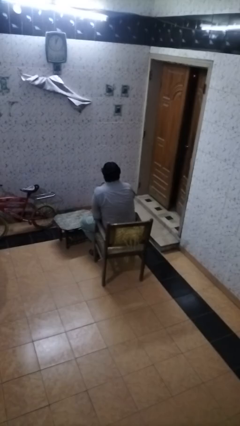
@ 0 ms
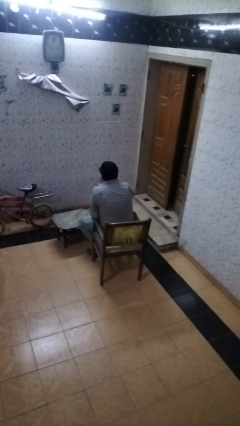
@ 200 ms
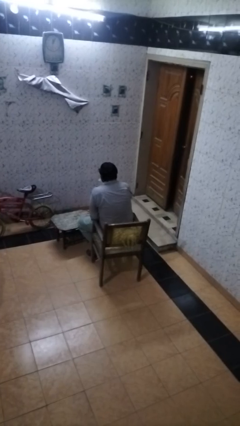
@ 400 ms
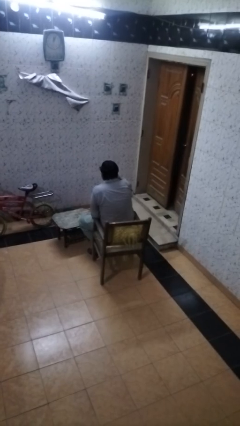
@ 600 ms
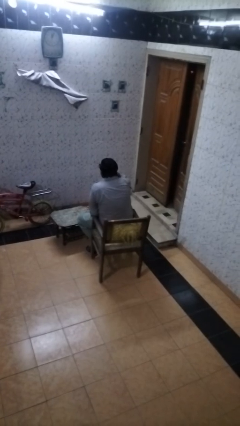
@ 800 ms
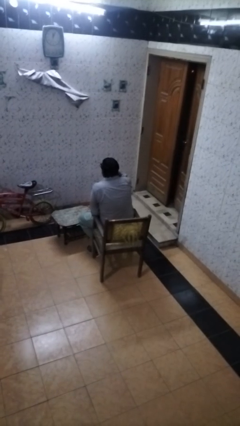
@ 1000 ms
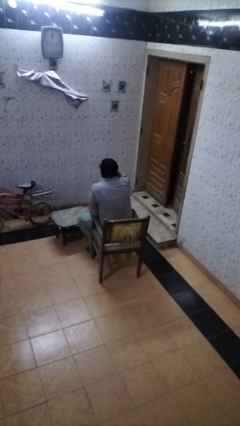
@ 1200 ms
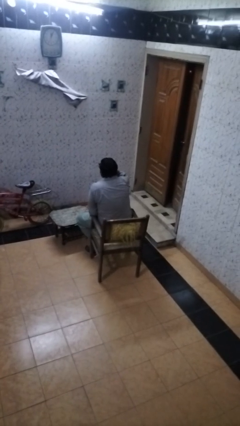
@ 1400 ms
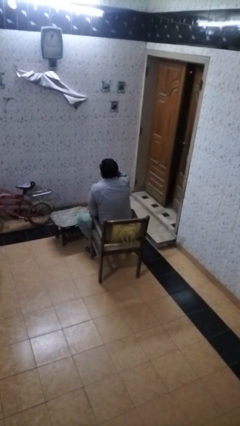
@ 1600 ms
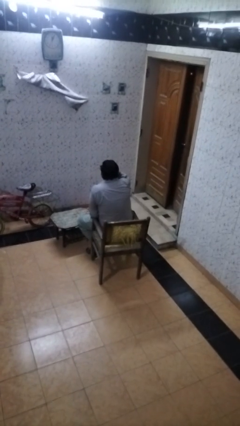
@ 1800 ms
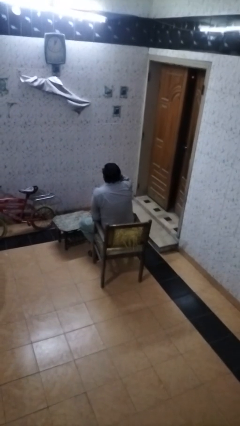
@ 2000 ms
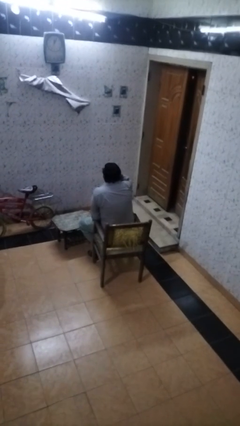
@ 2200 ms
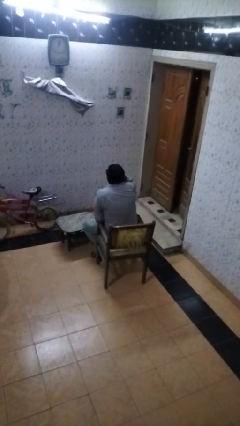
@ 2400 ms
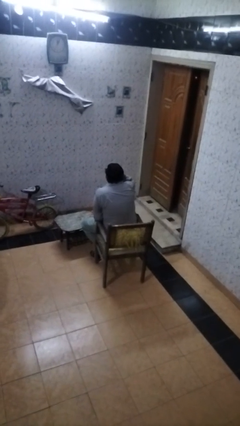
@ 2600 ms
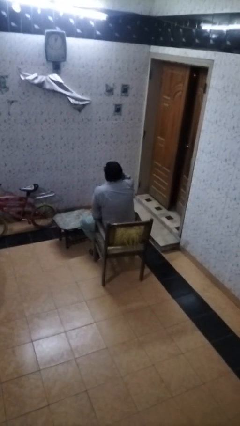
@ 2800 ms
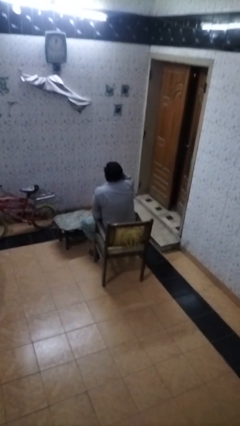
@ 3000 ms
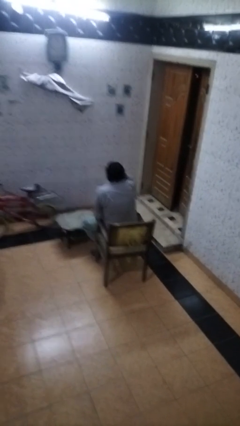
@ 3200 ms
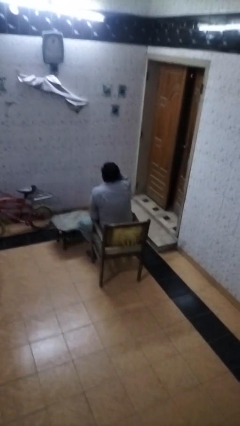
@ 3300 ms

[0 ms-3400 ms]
person drinks from shotglass

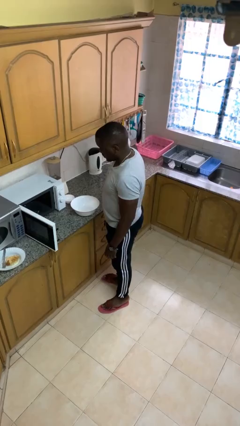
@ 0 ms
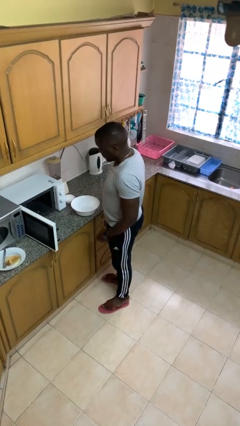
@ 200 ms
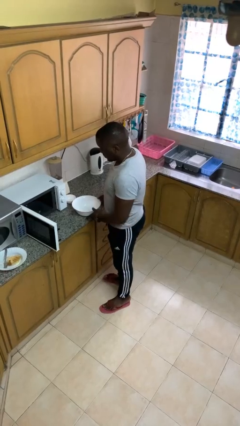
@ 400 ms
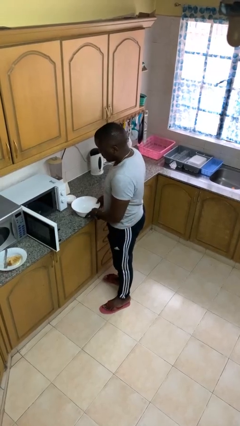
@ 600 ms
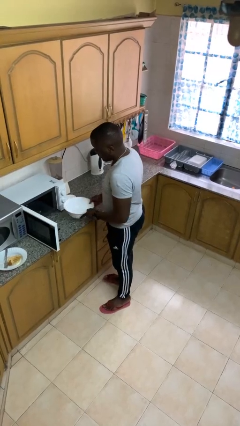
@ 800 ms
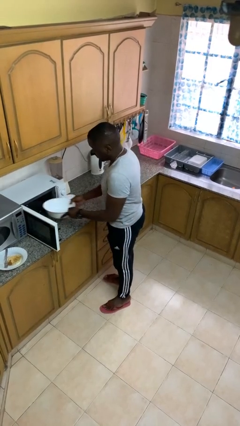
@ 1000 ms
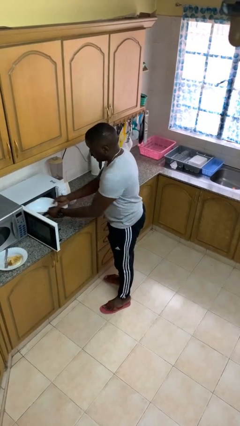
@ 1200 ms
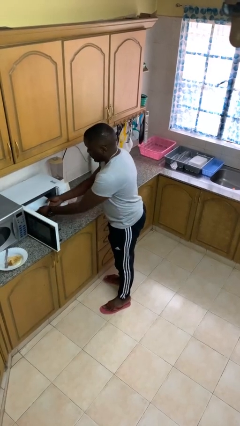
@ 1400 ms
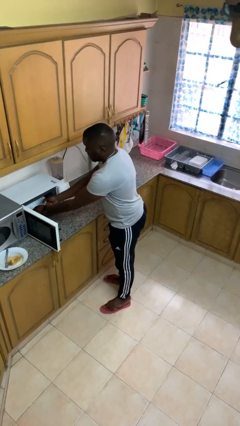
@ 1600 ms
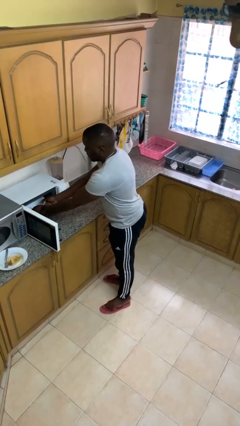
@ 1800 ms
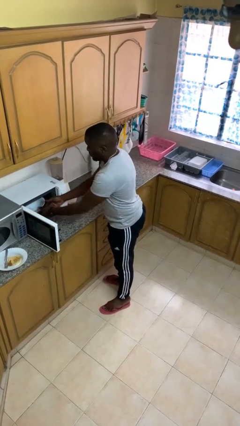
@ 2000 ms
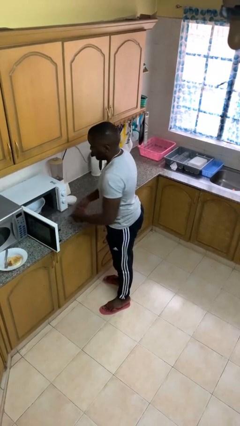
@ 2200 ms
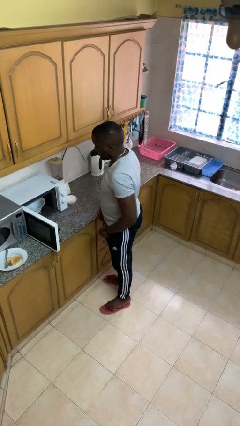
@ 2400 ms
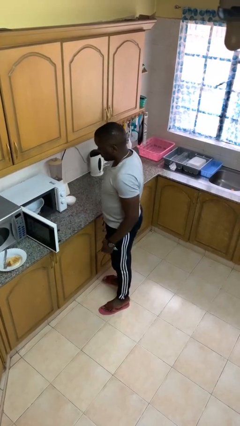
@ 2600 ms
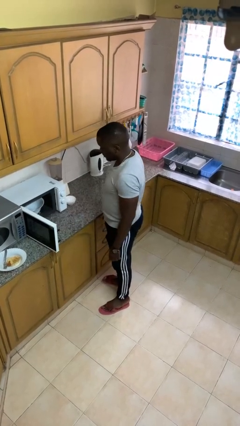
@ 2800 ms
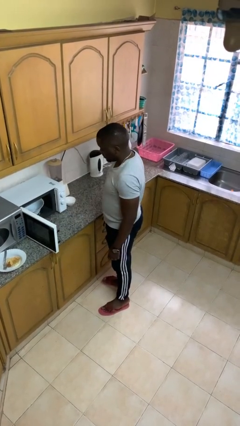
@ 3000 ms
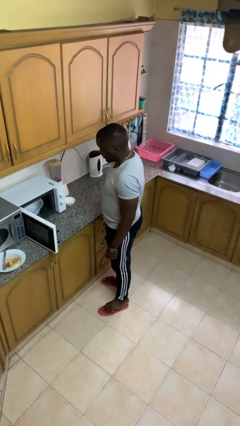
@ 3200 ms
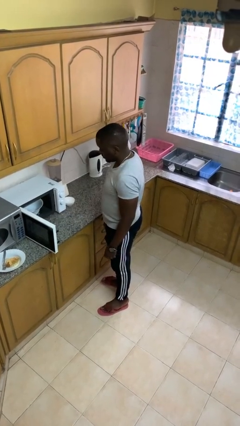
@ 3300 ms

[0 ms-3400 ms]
person puts object into microwave

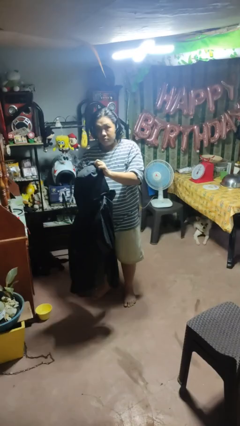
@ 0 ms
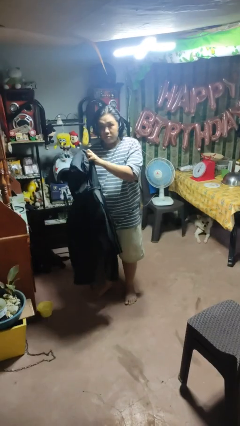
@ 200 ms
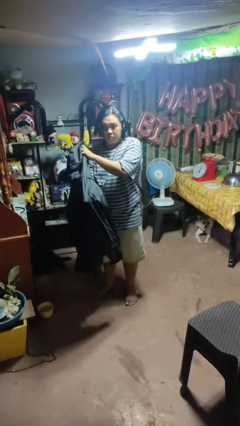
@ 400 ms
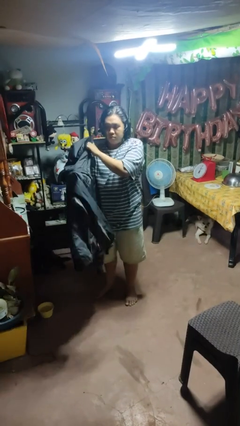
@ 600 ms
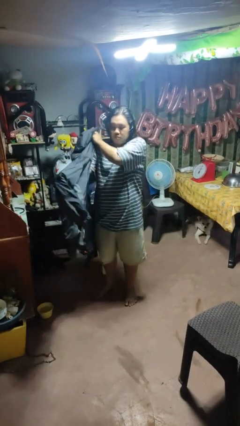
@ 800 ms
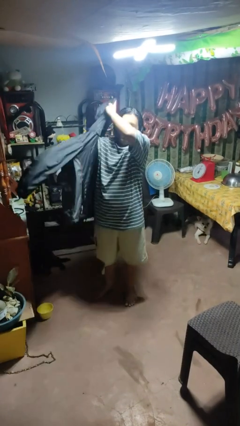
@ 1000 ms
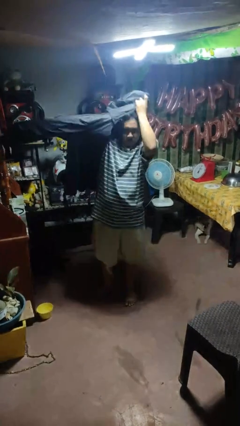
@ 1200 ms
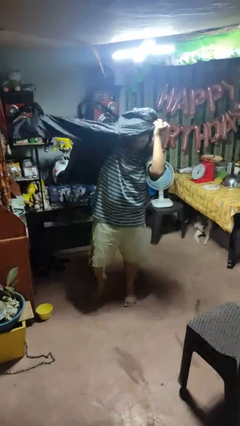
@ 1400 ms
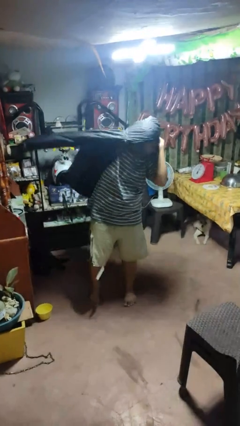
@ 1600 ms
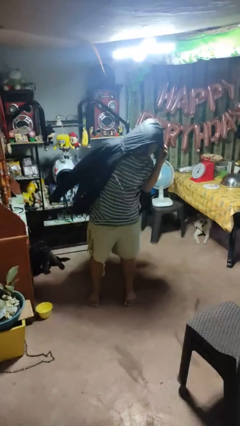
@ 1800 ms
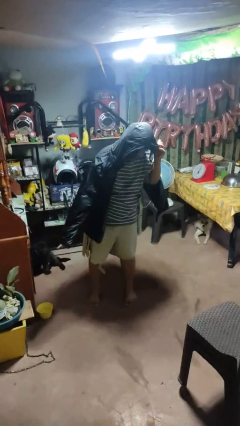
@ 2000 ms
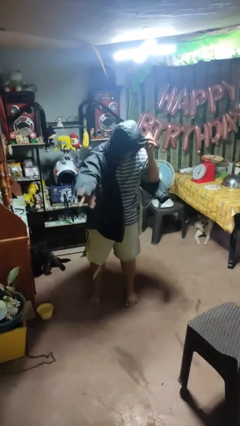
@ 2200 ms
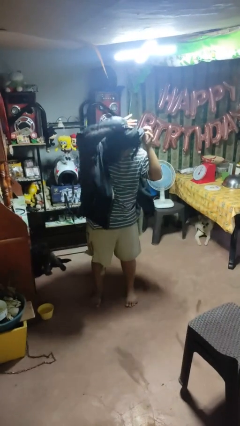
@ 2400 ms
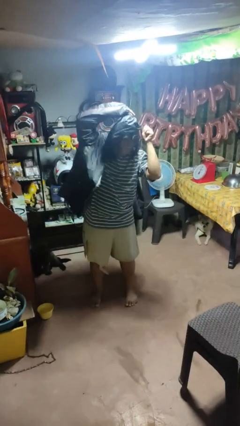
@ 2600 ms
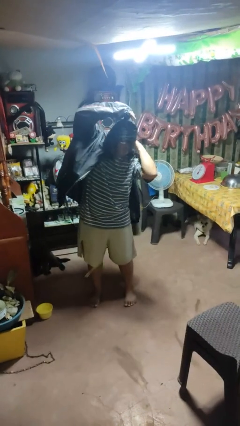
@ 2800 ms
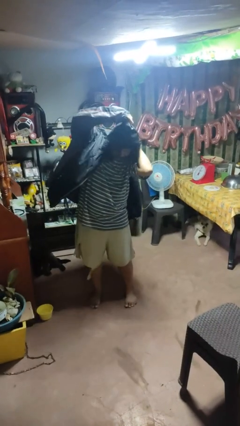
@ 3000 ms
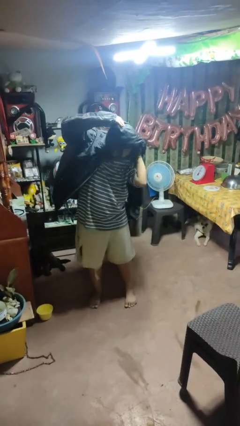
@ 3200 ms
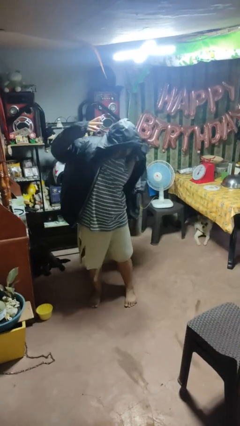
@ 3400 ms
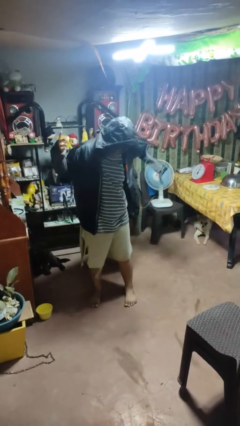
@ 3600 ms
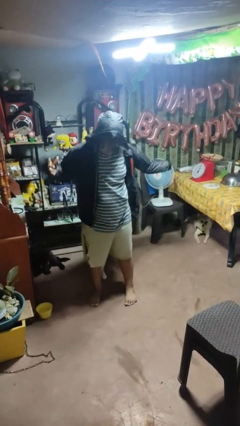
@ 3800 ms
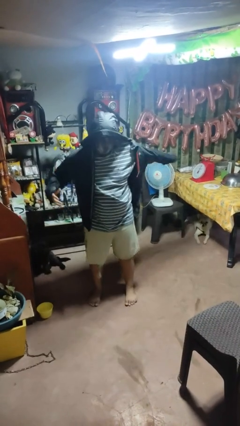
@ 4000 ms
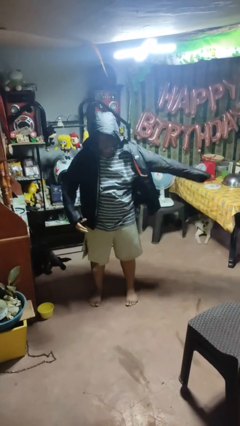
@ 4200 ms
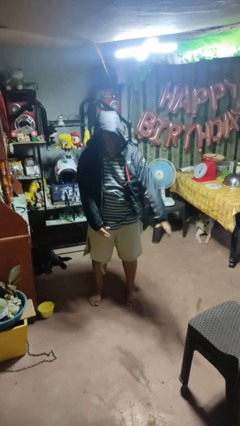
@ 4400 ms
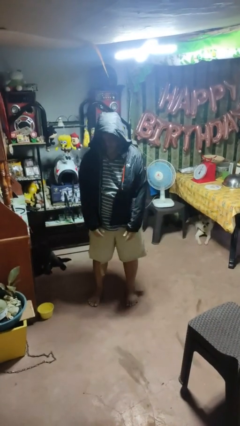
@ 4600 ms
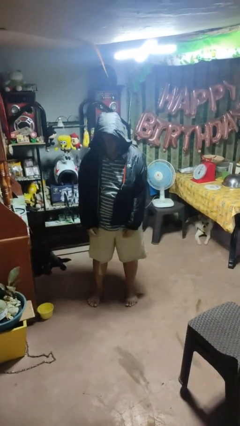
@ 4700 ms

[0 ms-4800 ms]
person puts on hoodie

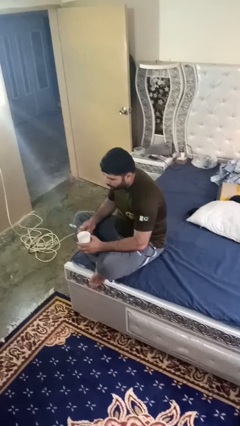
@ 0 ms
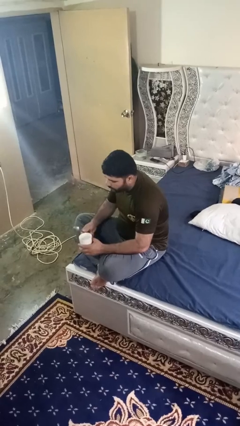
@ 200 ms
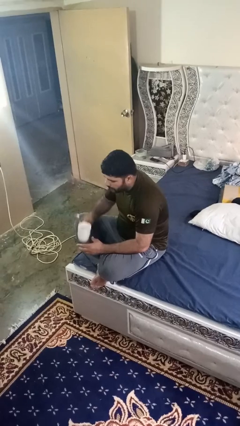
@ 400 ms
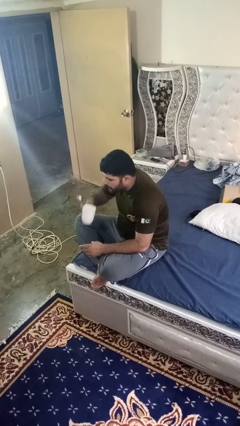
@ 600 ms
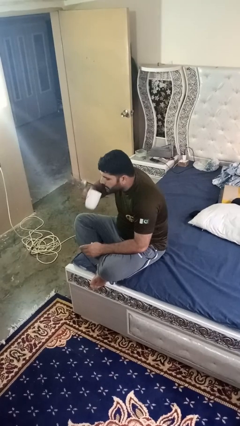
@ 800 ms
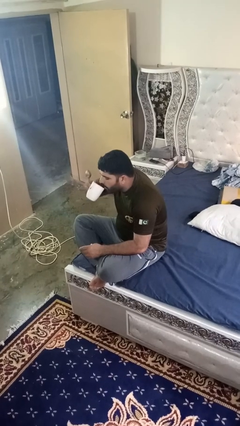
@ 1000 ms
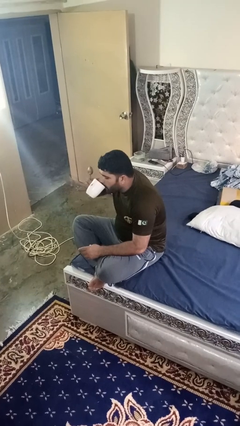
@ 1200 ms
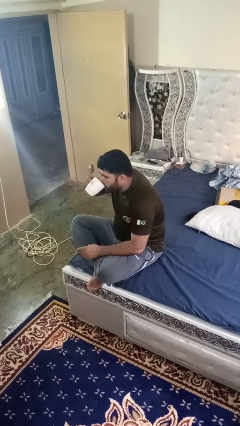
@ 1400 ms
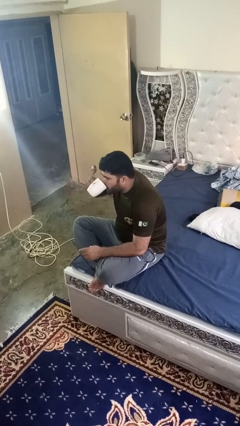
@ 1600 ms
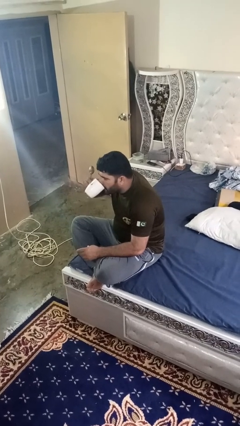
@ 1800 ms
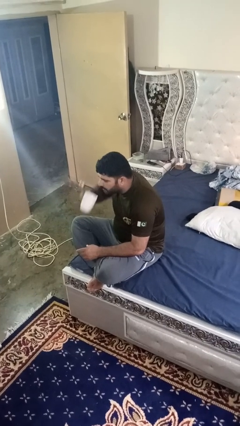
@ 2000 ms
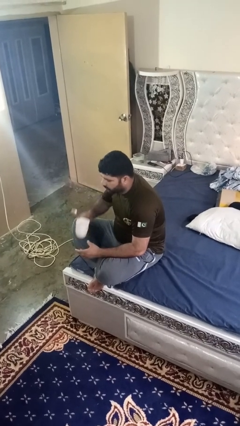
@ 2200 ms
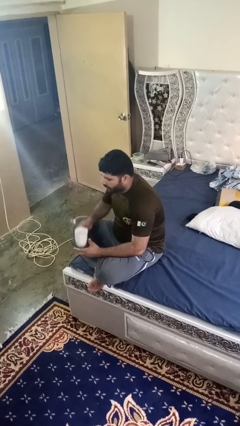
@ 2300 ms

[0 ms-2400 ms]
person drinks from mug

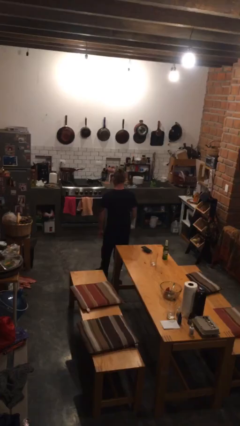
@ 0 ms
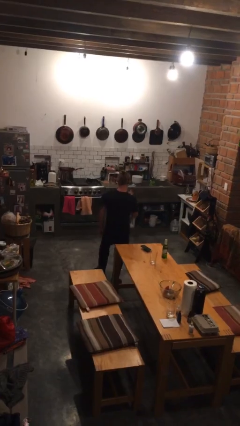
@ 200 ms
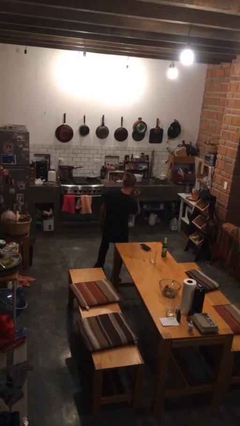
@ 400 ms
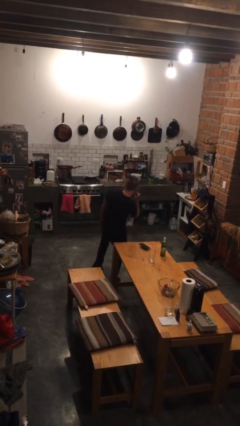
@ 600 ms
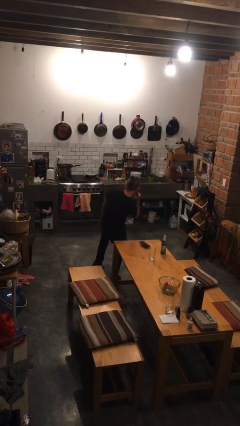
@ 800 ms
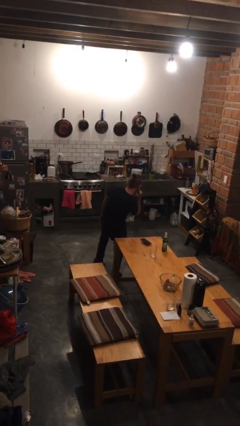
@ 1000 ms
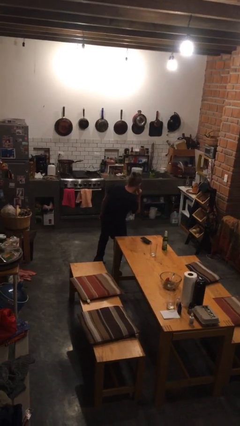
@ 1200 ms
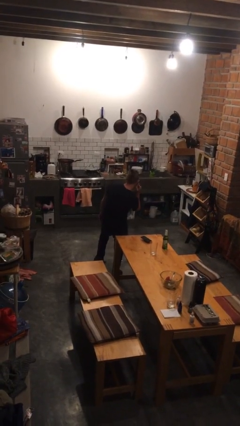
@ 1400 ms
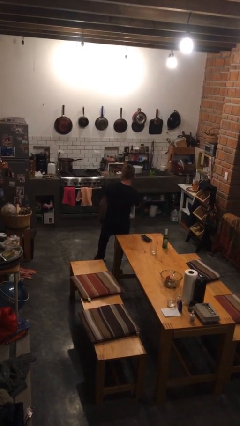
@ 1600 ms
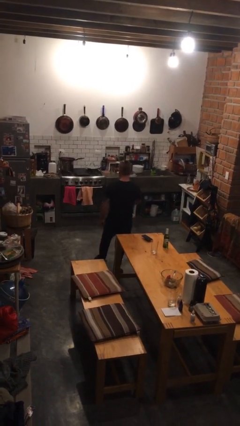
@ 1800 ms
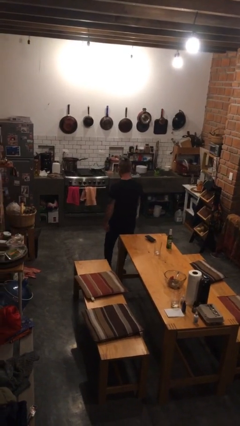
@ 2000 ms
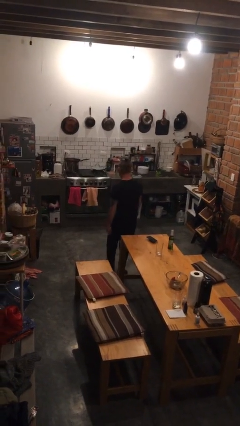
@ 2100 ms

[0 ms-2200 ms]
person gestures listen closely

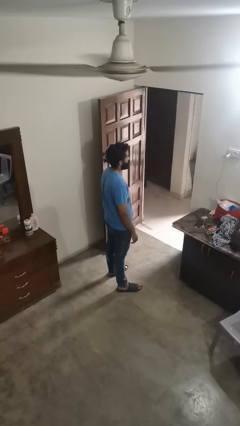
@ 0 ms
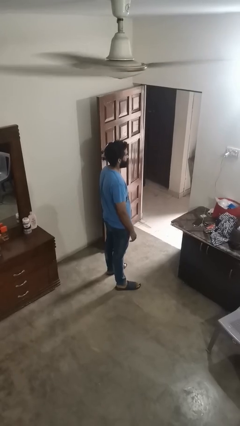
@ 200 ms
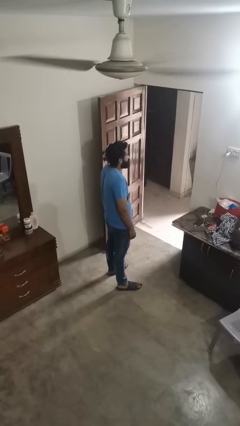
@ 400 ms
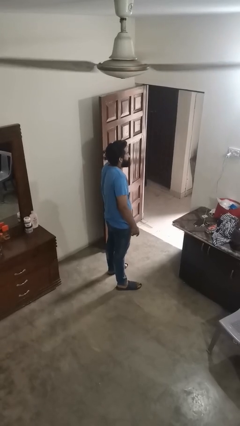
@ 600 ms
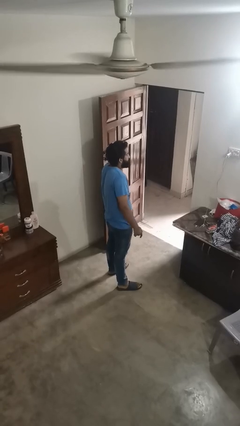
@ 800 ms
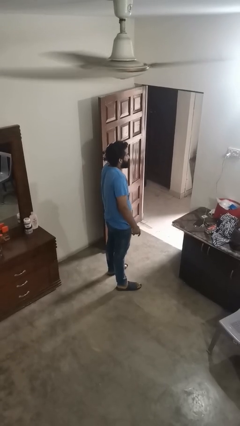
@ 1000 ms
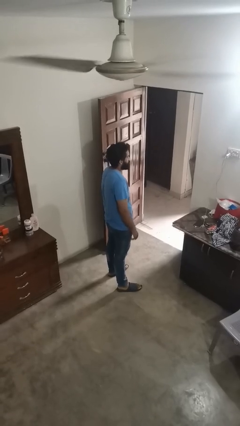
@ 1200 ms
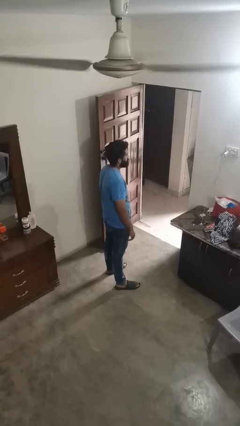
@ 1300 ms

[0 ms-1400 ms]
person shrugs
